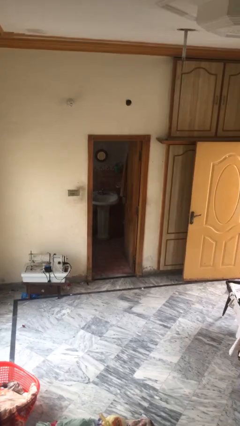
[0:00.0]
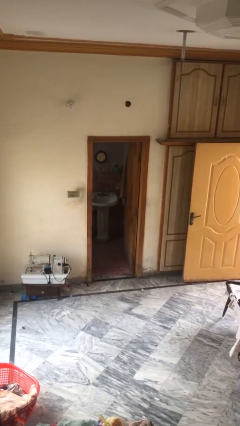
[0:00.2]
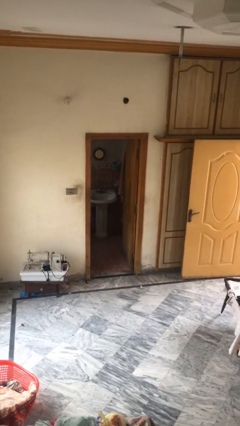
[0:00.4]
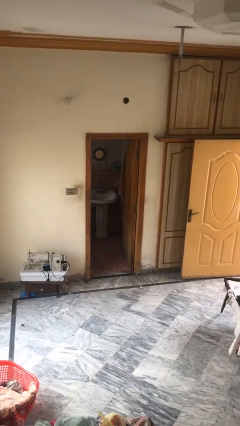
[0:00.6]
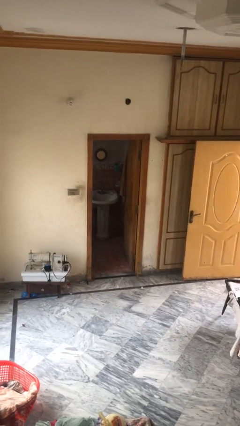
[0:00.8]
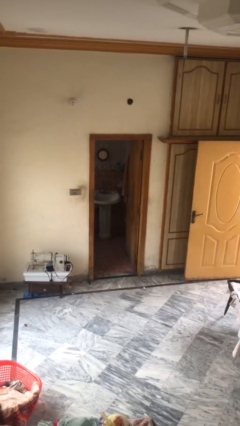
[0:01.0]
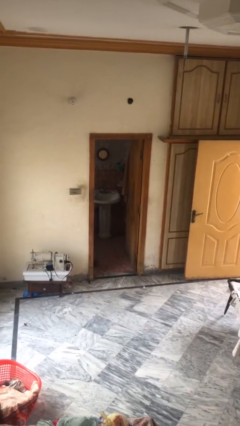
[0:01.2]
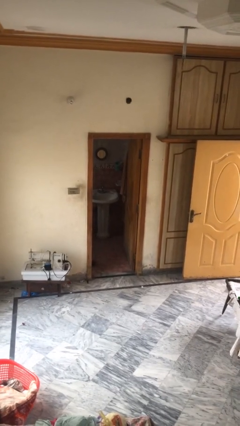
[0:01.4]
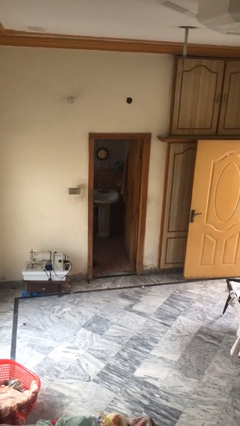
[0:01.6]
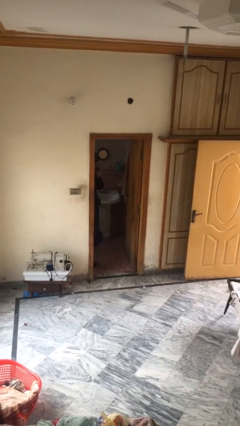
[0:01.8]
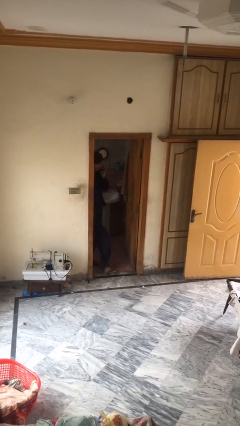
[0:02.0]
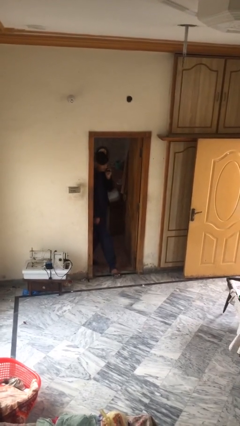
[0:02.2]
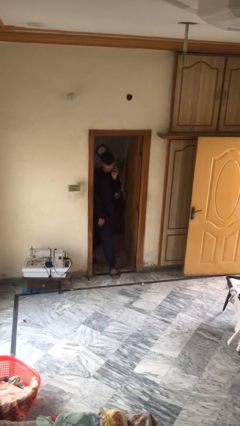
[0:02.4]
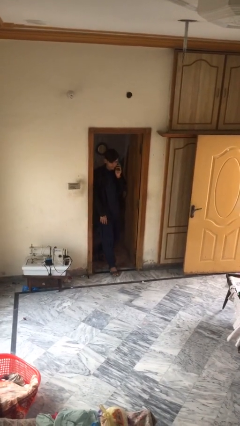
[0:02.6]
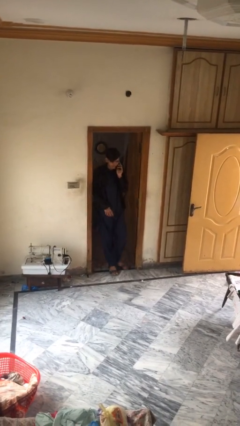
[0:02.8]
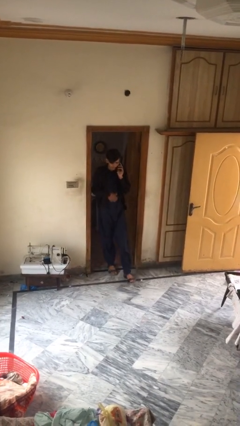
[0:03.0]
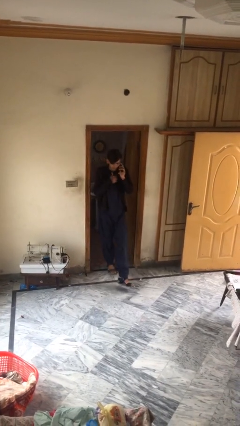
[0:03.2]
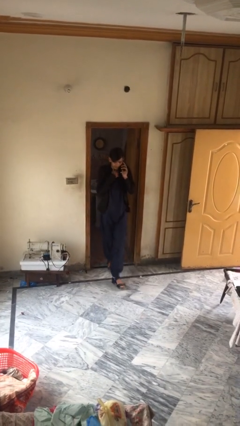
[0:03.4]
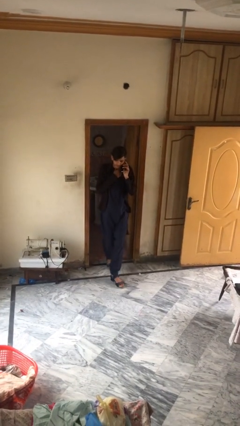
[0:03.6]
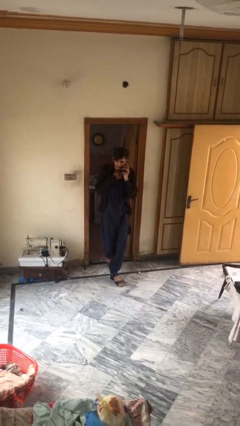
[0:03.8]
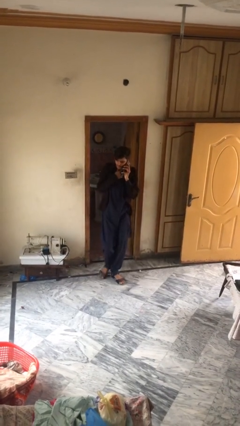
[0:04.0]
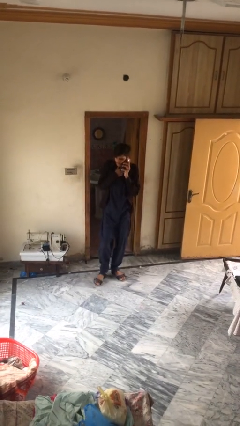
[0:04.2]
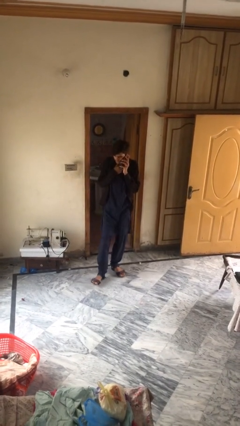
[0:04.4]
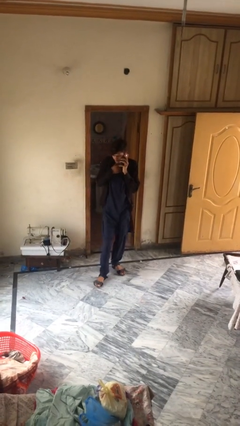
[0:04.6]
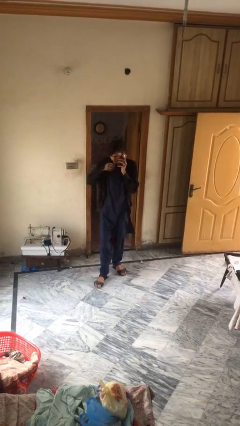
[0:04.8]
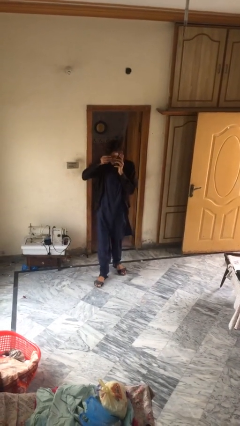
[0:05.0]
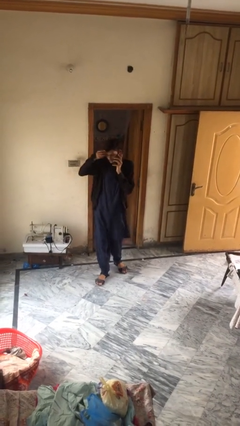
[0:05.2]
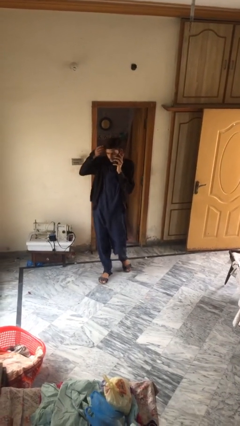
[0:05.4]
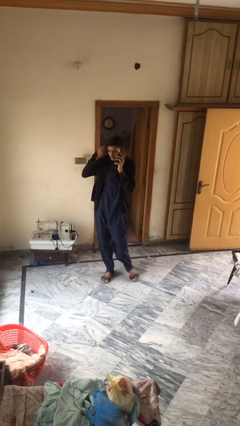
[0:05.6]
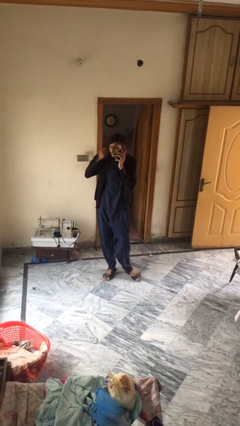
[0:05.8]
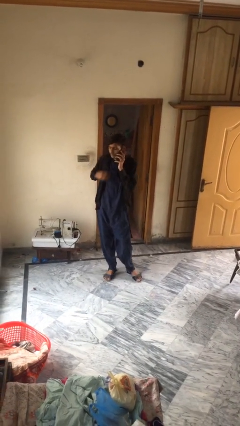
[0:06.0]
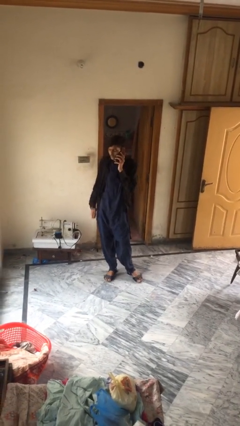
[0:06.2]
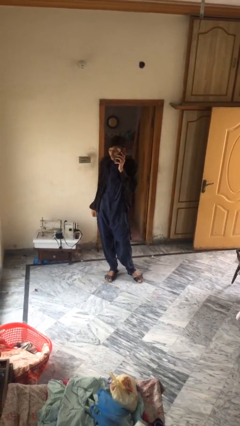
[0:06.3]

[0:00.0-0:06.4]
person enters scene through structure

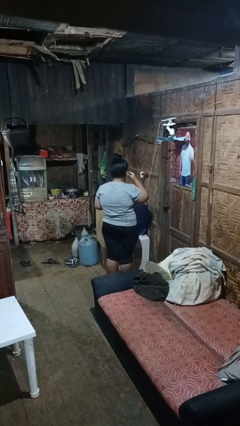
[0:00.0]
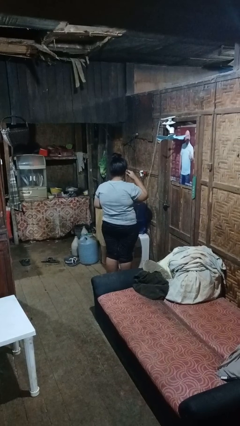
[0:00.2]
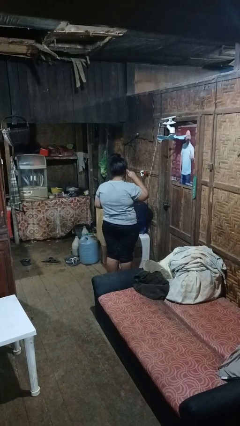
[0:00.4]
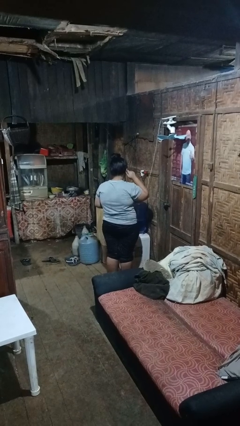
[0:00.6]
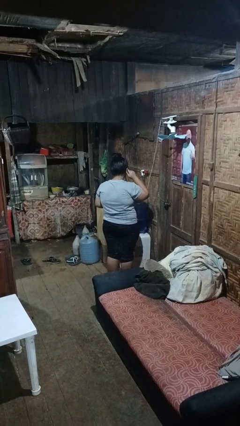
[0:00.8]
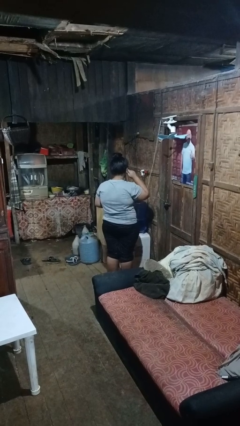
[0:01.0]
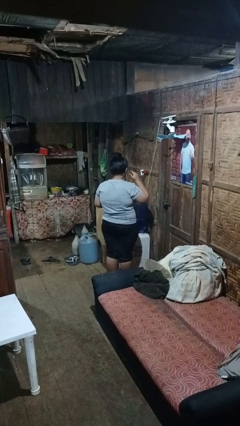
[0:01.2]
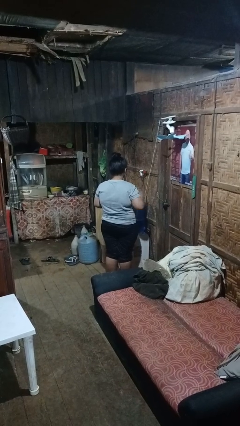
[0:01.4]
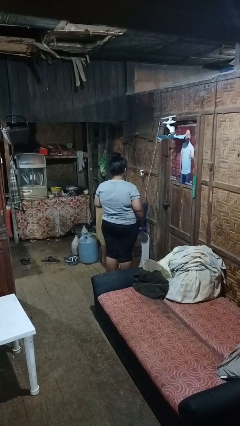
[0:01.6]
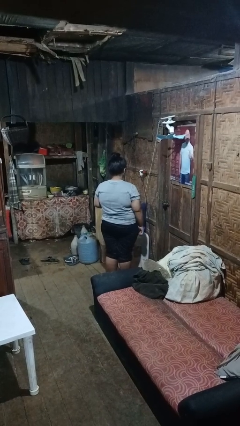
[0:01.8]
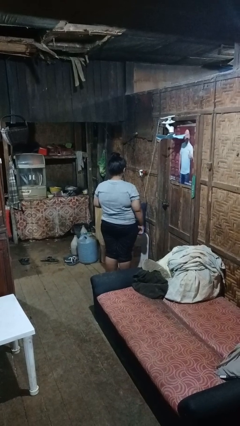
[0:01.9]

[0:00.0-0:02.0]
person puts on headphones

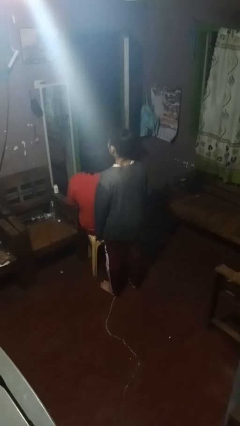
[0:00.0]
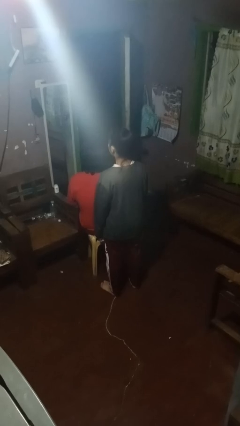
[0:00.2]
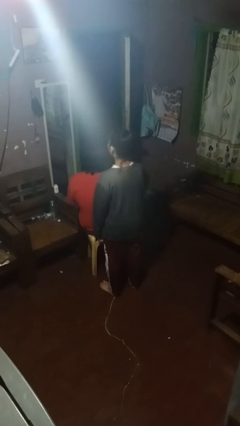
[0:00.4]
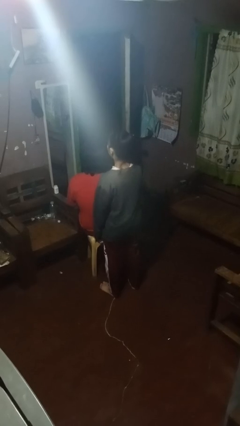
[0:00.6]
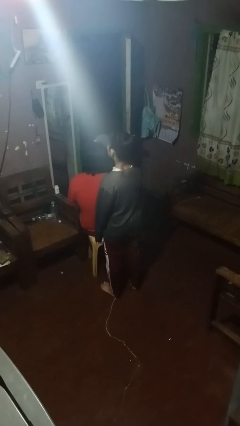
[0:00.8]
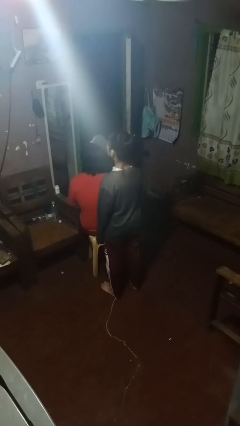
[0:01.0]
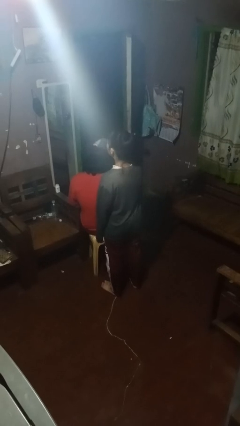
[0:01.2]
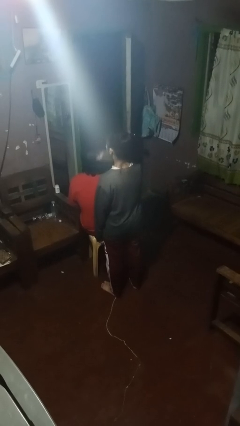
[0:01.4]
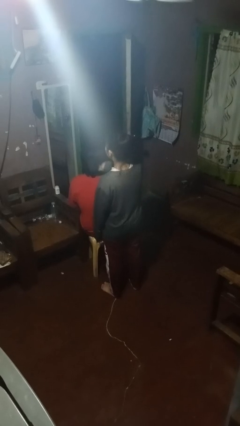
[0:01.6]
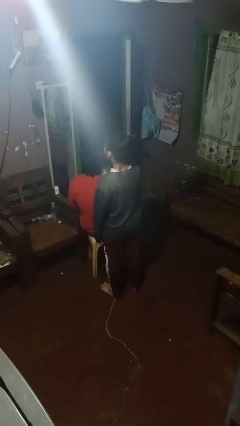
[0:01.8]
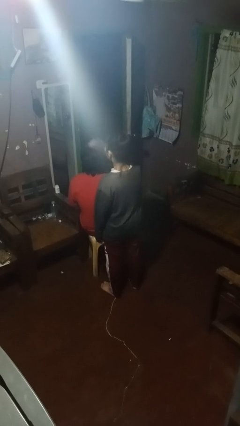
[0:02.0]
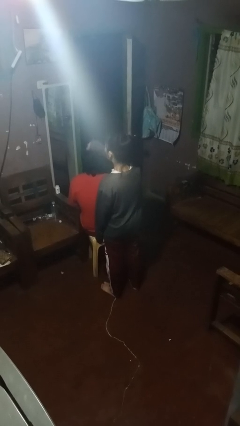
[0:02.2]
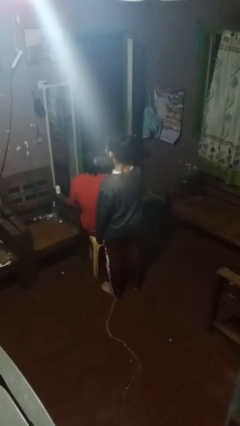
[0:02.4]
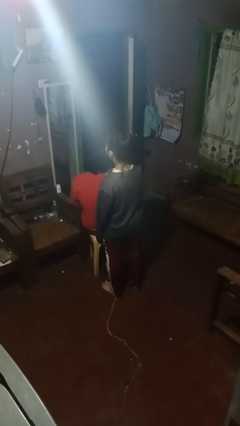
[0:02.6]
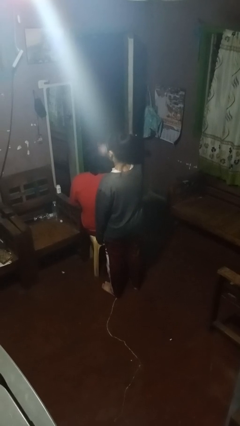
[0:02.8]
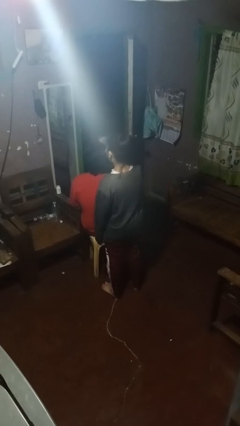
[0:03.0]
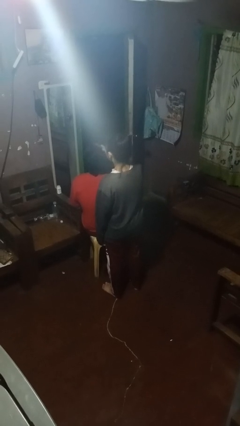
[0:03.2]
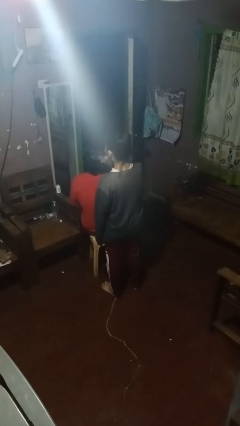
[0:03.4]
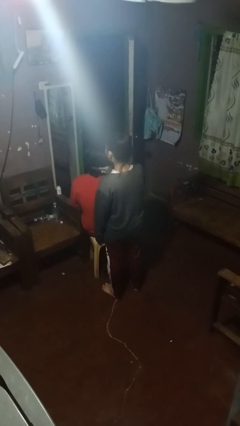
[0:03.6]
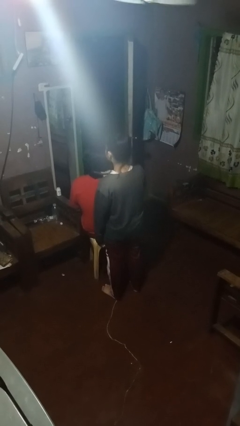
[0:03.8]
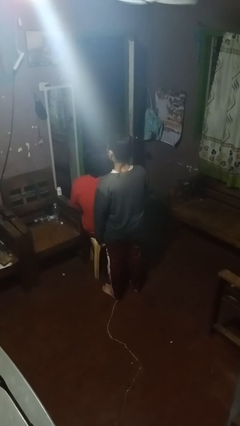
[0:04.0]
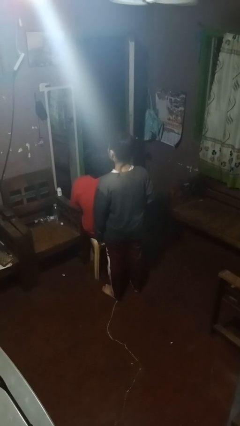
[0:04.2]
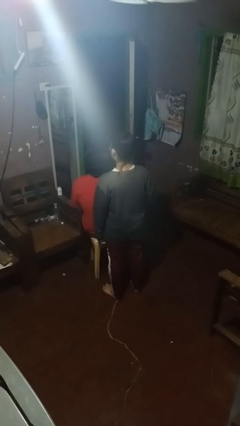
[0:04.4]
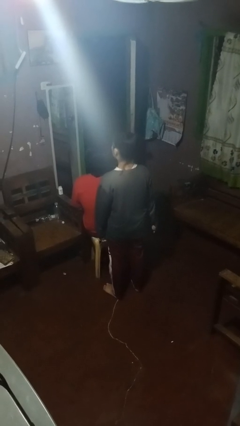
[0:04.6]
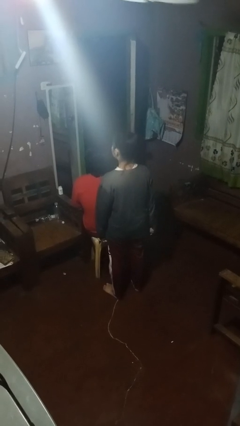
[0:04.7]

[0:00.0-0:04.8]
person brushes hair of person

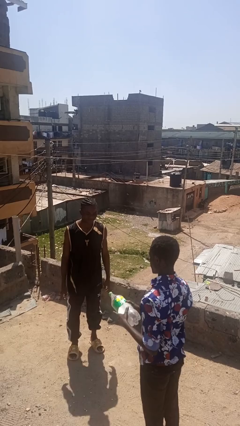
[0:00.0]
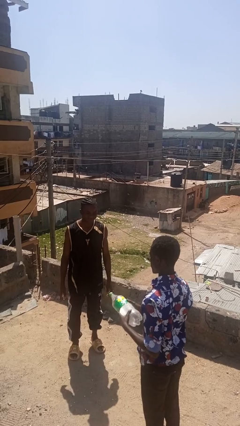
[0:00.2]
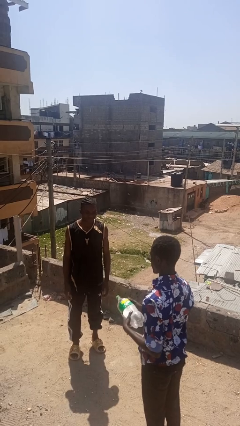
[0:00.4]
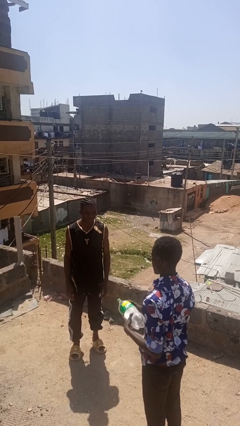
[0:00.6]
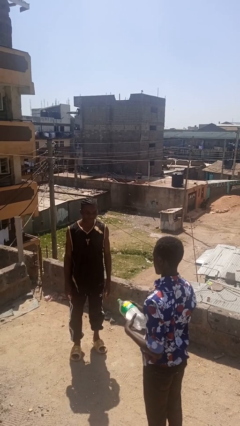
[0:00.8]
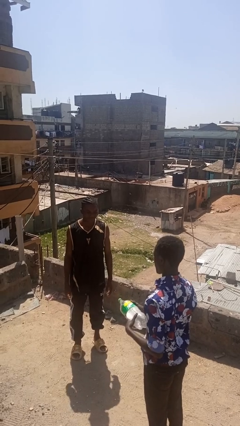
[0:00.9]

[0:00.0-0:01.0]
person catches object from person

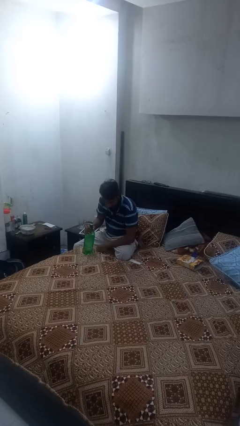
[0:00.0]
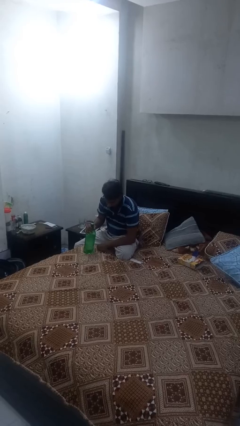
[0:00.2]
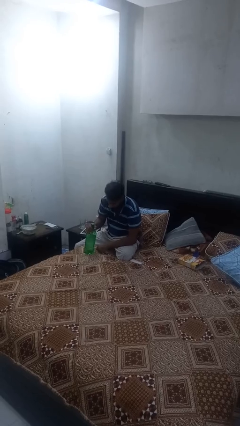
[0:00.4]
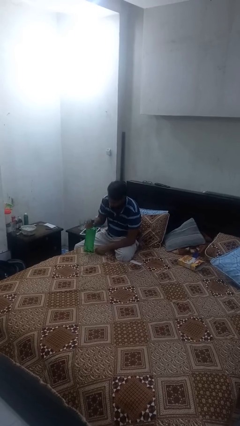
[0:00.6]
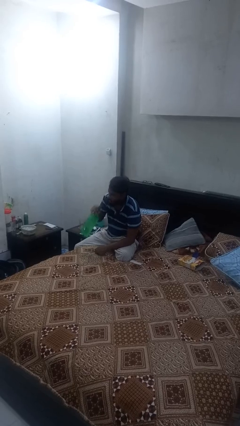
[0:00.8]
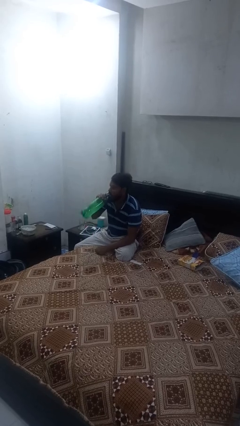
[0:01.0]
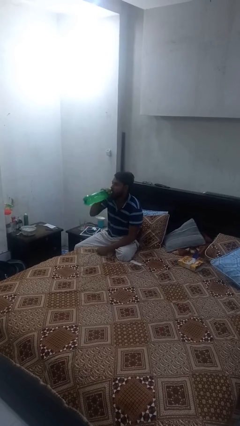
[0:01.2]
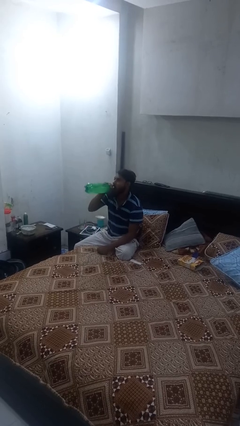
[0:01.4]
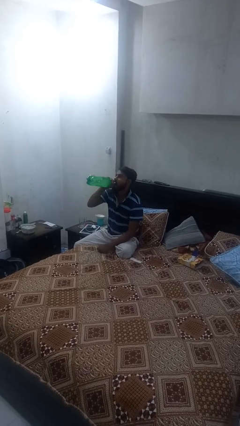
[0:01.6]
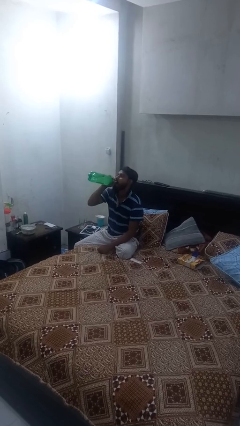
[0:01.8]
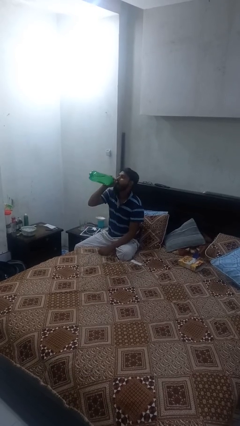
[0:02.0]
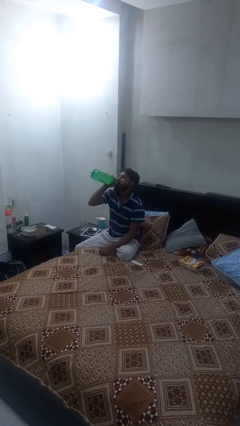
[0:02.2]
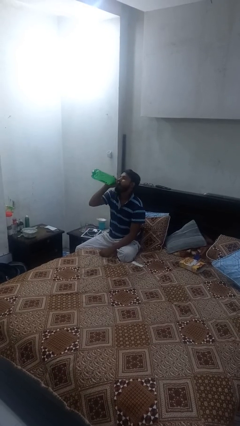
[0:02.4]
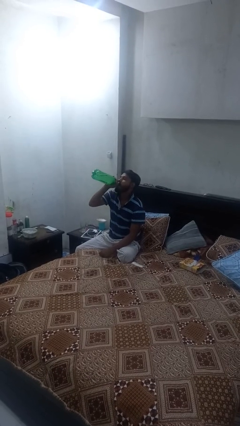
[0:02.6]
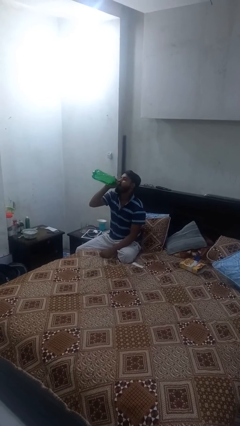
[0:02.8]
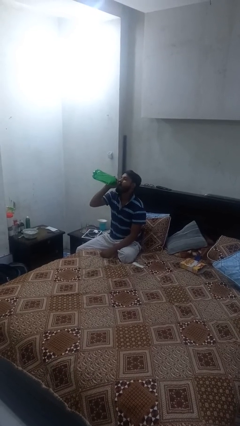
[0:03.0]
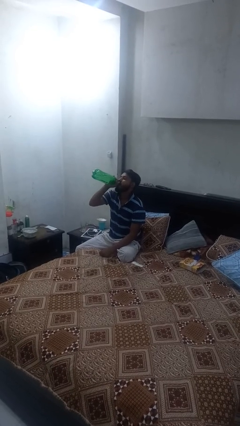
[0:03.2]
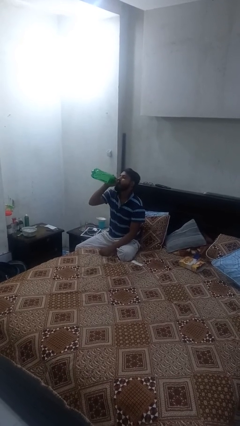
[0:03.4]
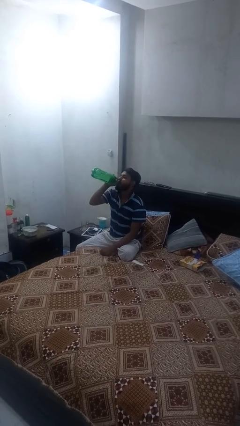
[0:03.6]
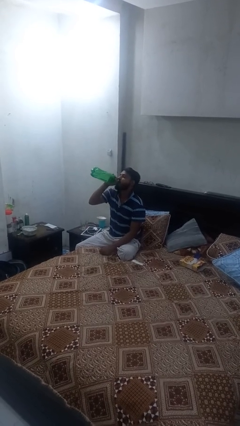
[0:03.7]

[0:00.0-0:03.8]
person drinks from bottle
